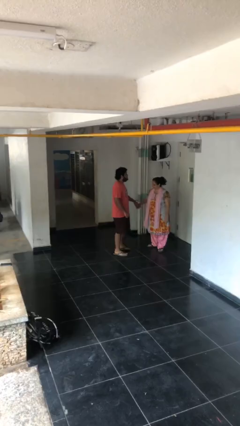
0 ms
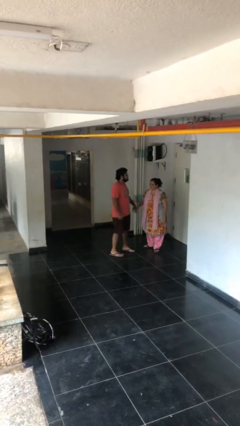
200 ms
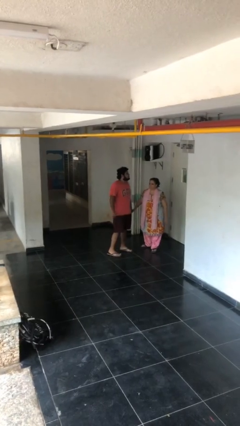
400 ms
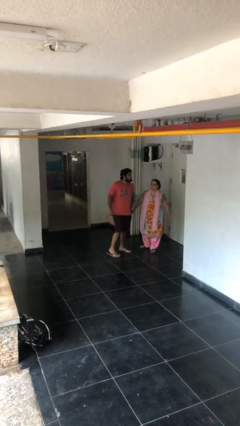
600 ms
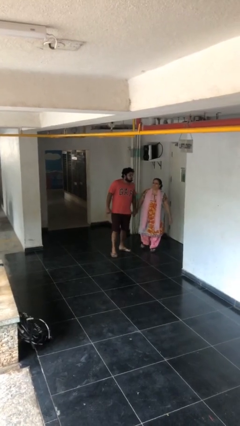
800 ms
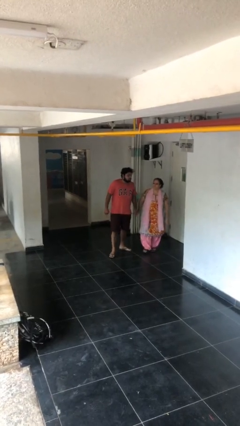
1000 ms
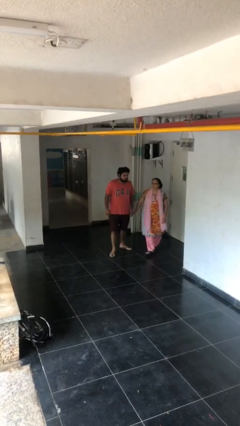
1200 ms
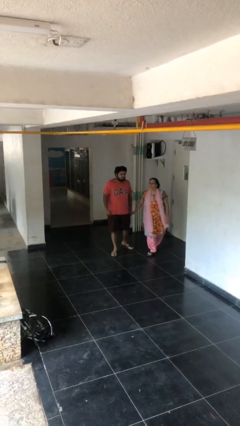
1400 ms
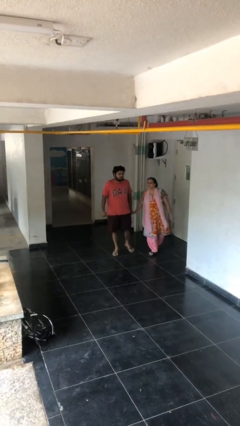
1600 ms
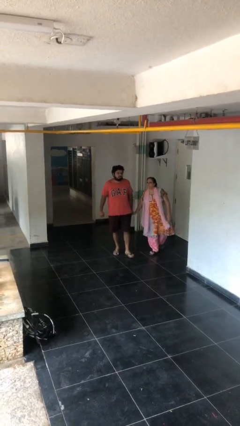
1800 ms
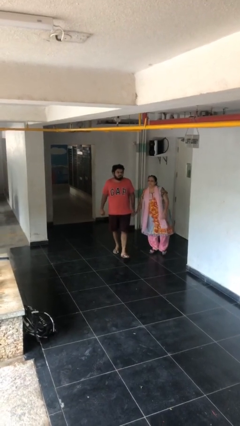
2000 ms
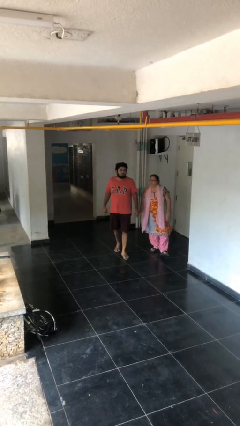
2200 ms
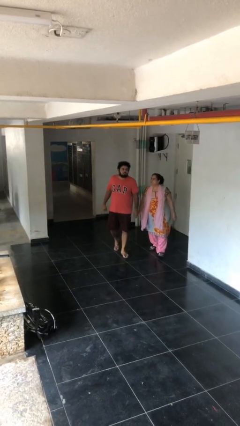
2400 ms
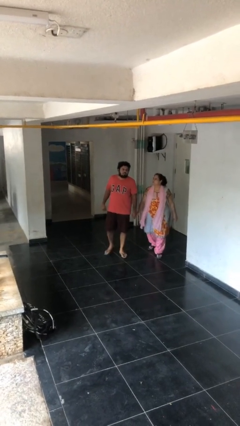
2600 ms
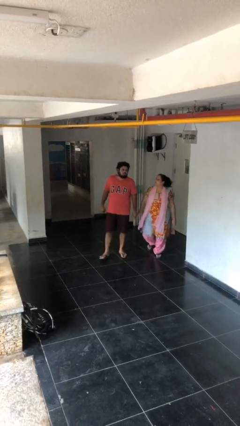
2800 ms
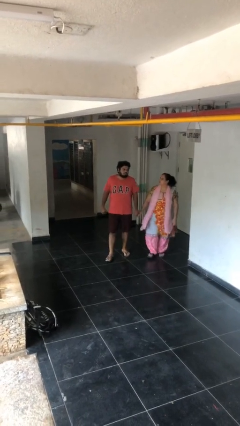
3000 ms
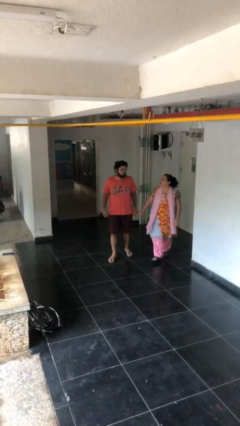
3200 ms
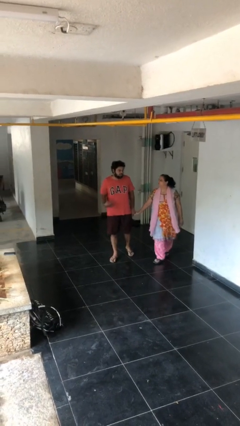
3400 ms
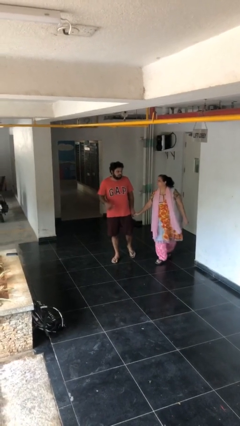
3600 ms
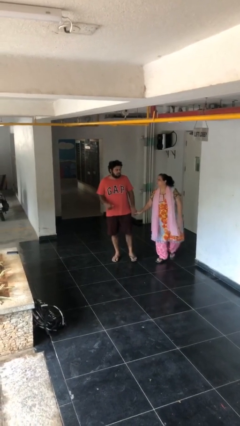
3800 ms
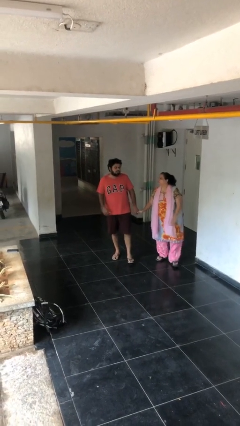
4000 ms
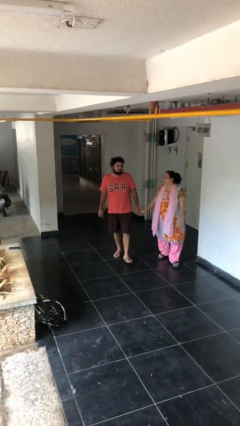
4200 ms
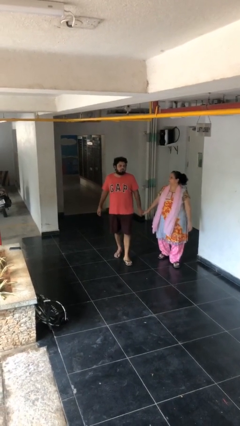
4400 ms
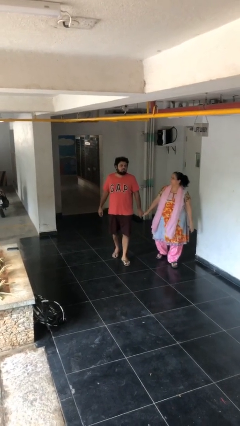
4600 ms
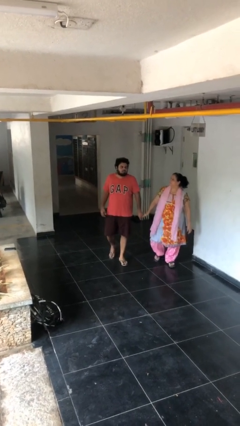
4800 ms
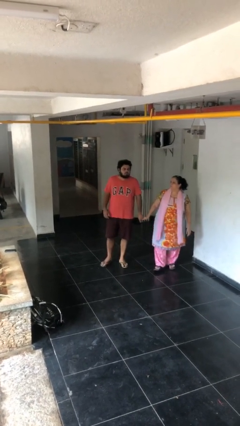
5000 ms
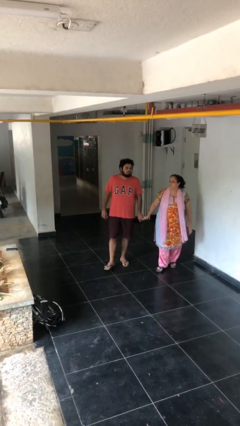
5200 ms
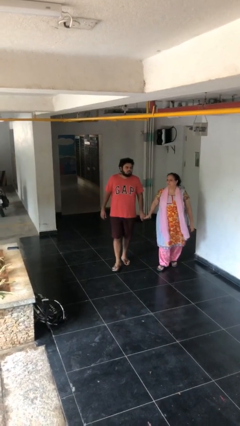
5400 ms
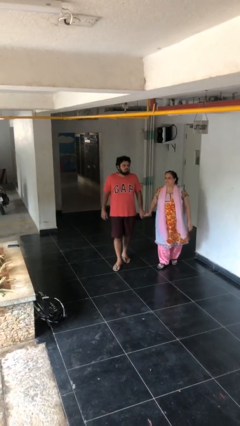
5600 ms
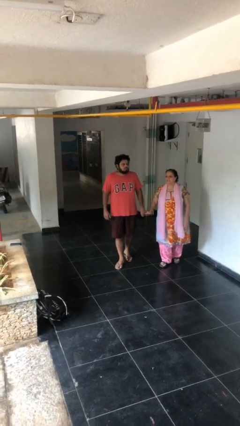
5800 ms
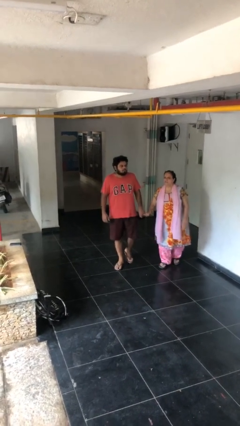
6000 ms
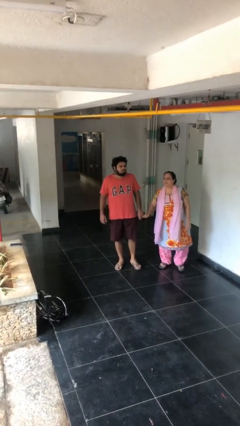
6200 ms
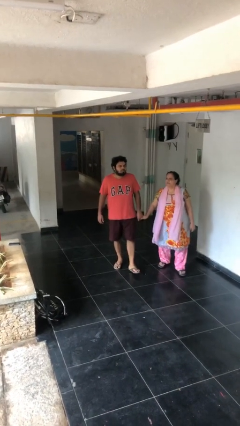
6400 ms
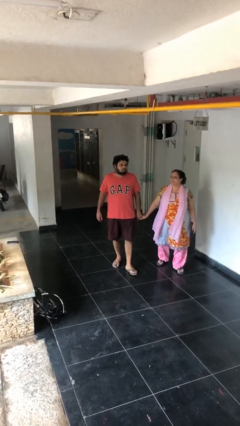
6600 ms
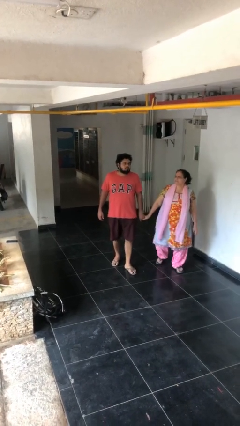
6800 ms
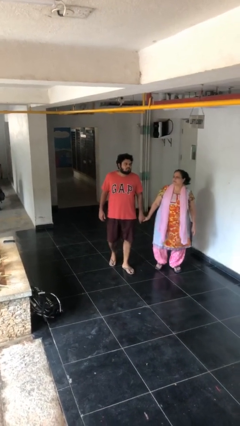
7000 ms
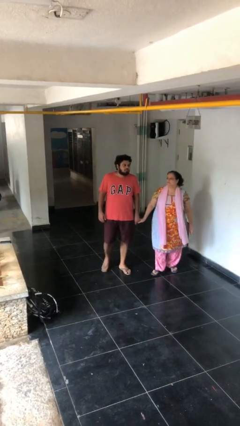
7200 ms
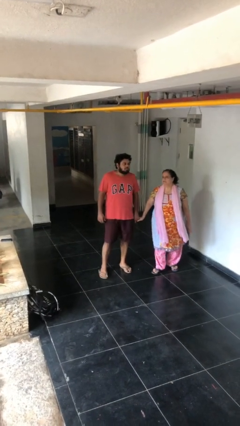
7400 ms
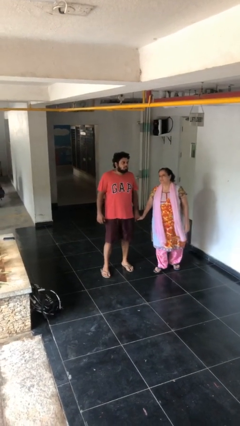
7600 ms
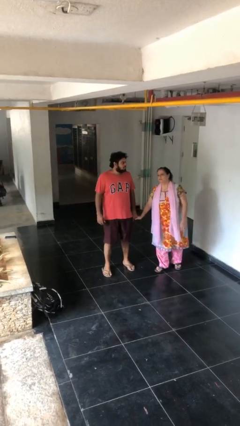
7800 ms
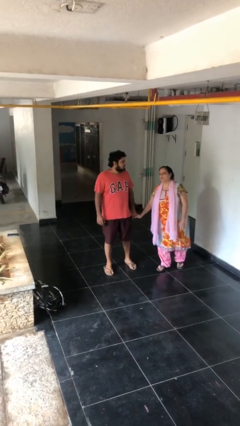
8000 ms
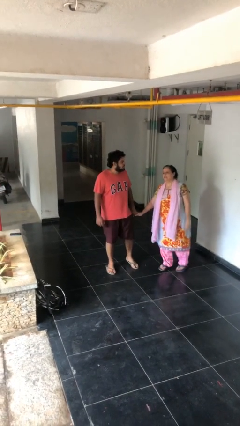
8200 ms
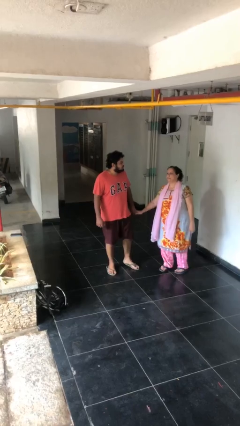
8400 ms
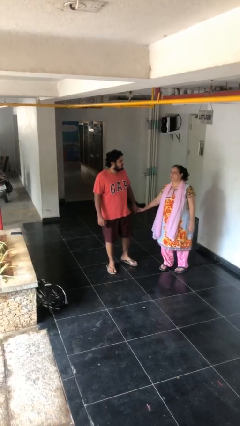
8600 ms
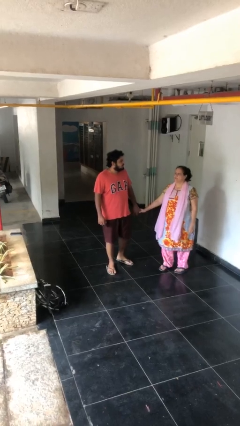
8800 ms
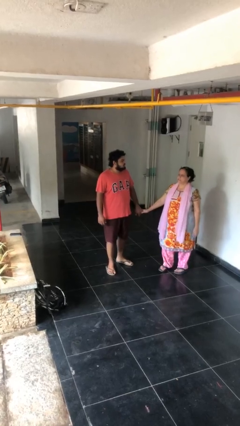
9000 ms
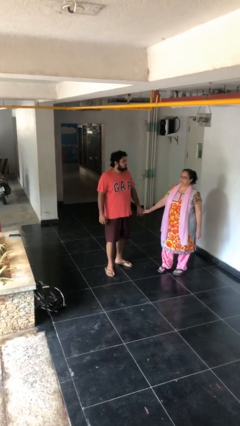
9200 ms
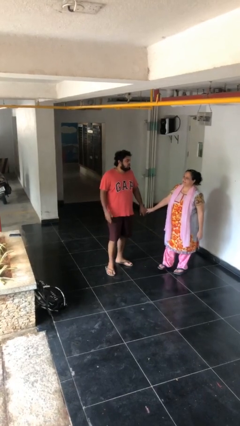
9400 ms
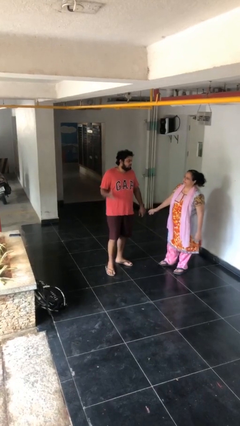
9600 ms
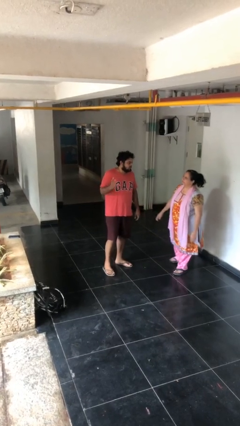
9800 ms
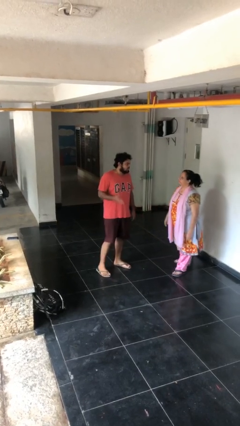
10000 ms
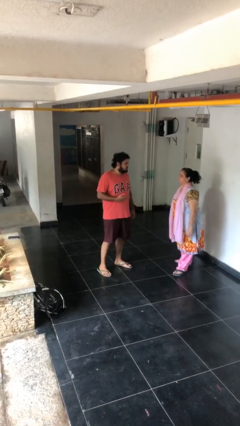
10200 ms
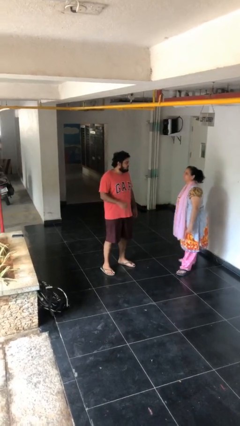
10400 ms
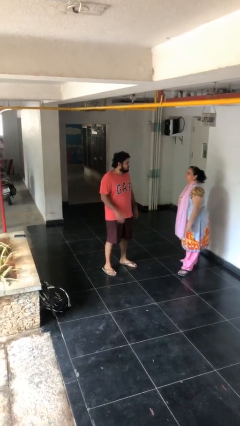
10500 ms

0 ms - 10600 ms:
person holds hand

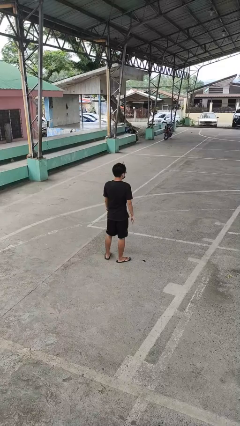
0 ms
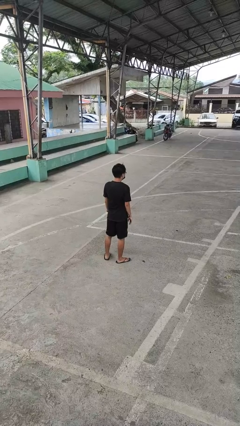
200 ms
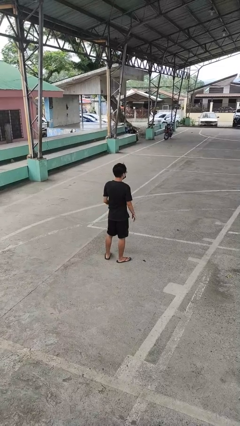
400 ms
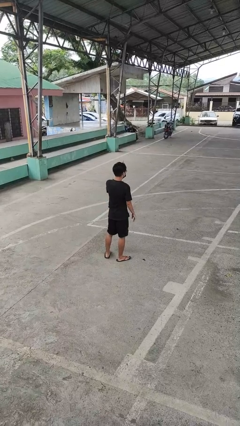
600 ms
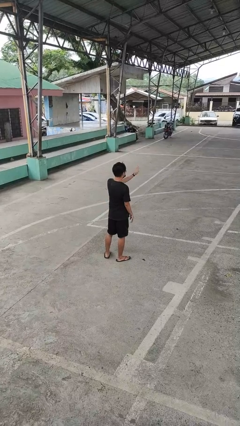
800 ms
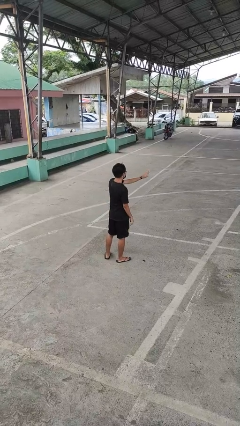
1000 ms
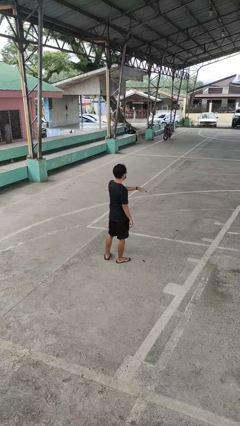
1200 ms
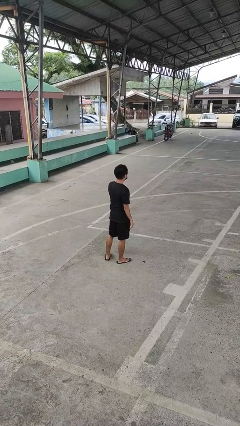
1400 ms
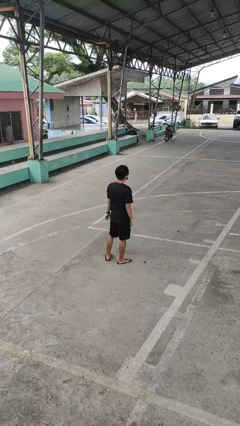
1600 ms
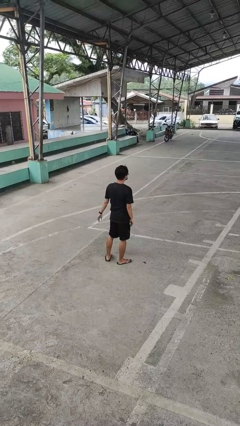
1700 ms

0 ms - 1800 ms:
person gestures swipe right

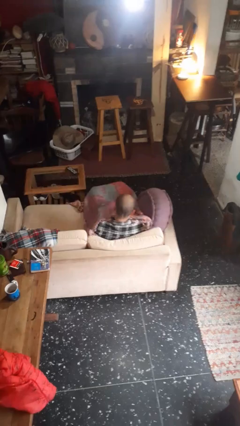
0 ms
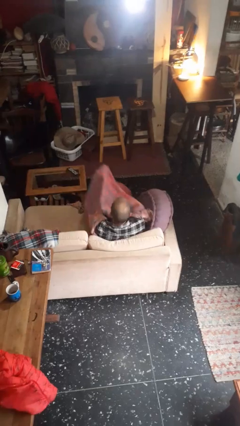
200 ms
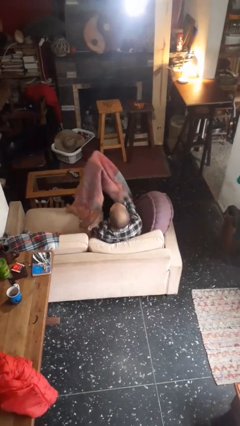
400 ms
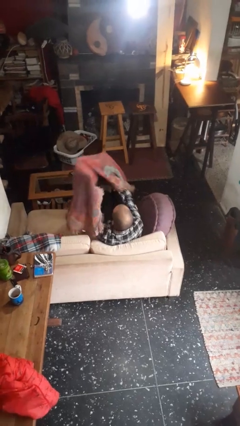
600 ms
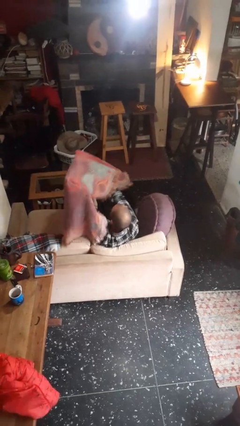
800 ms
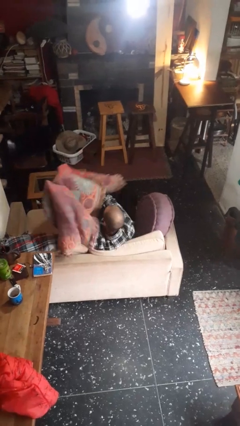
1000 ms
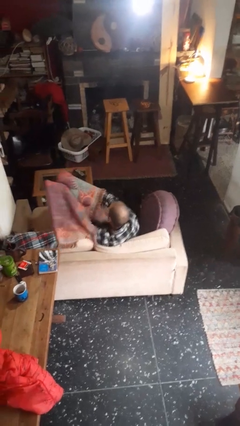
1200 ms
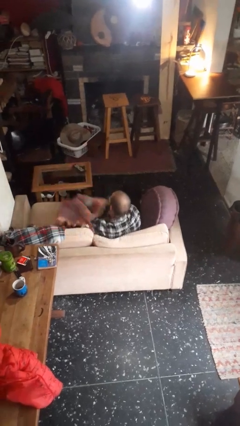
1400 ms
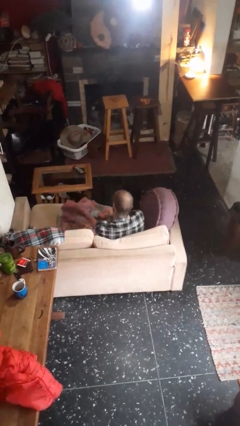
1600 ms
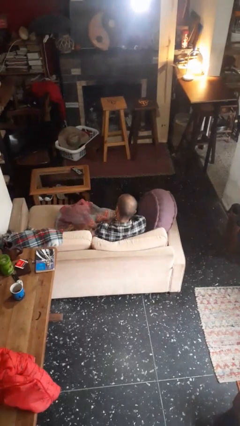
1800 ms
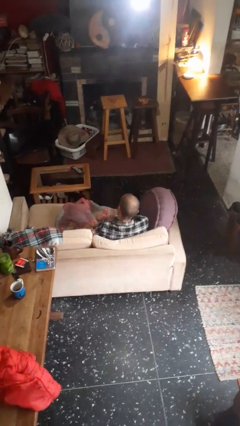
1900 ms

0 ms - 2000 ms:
person uncovers with blanket

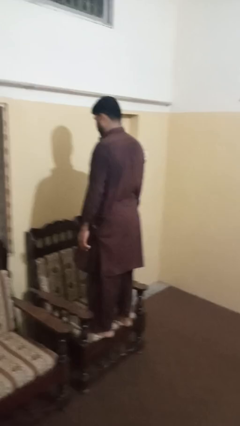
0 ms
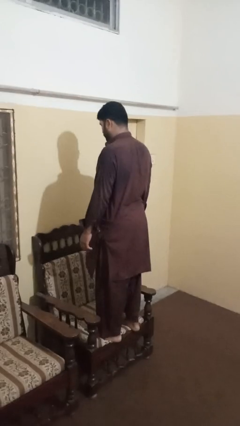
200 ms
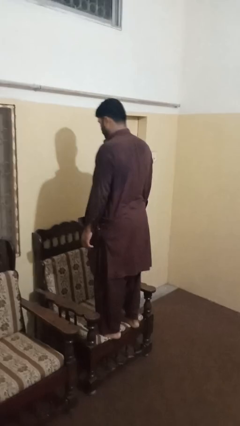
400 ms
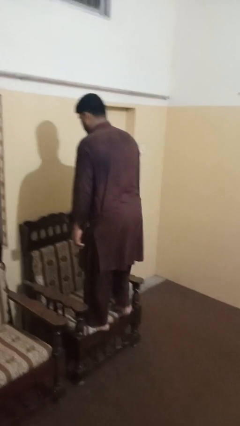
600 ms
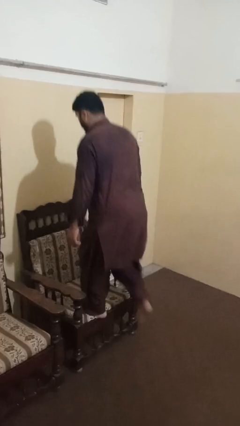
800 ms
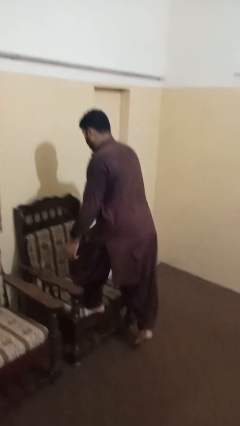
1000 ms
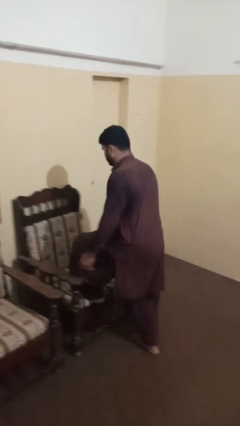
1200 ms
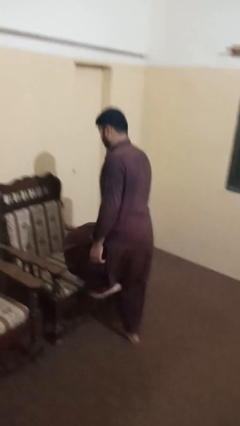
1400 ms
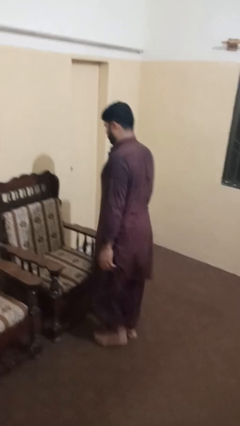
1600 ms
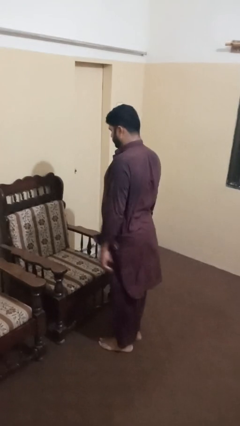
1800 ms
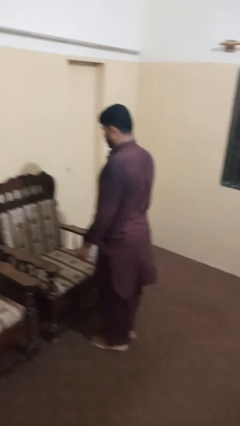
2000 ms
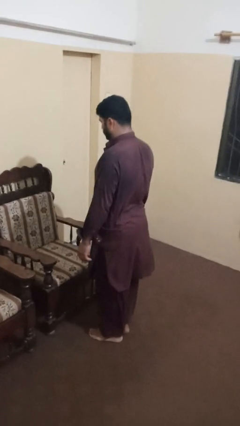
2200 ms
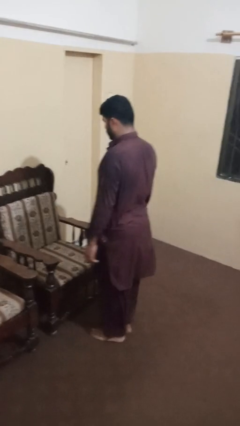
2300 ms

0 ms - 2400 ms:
person climbs off chair

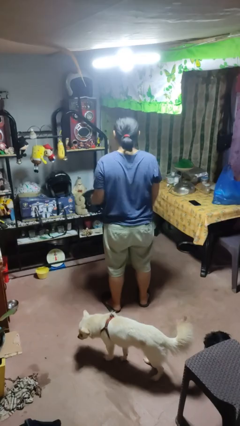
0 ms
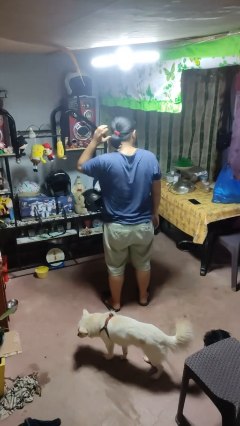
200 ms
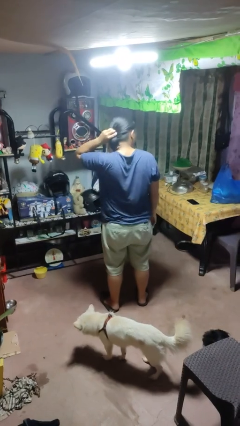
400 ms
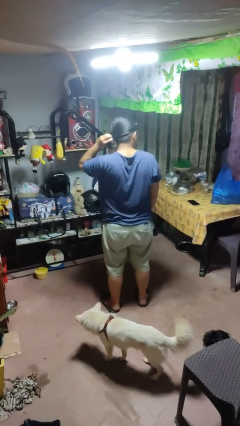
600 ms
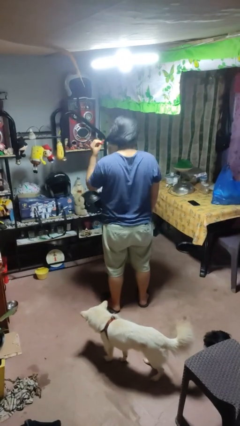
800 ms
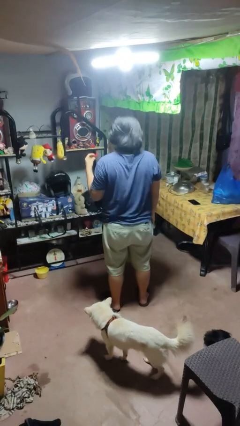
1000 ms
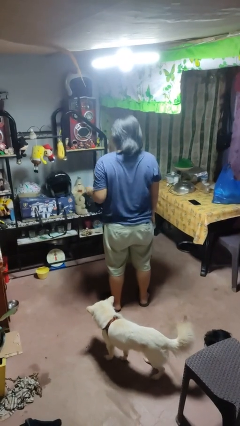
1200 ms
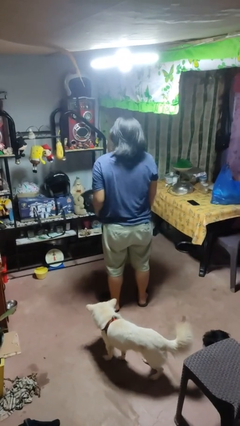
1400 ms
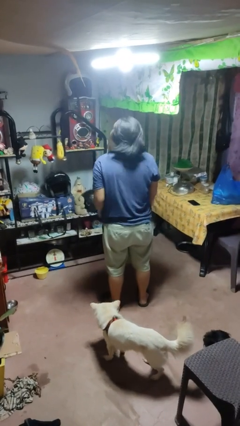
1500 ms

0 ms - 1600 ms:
person takes off hairtie
